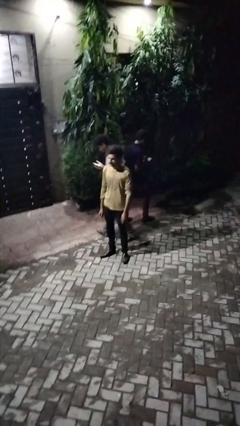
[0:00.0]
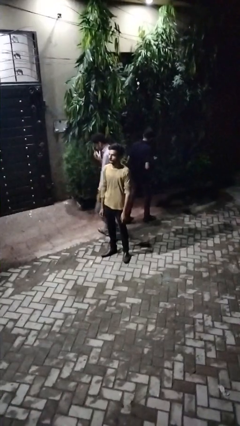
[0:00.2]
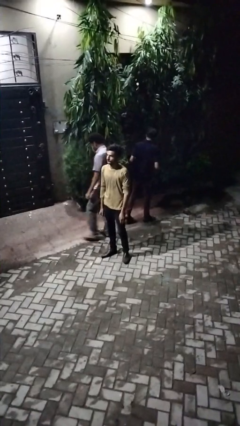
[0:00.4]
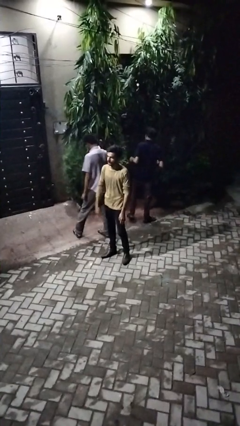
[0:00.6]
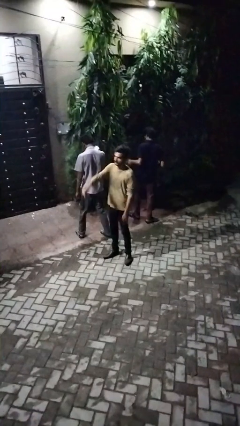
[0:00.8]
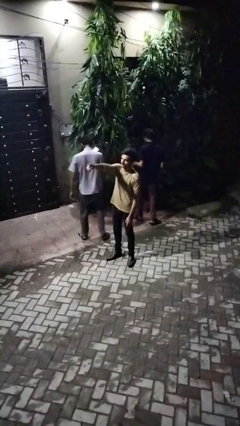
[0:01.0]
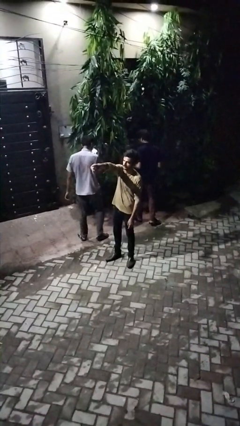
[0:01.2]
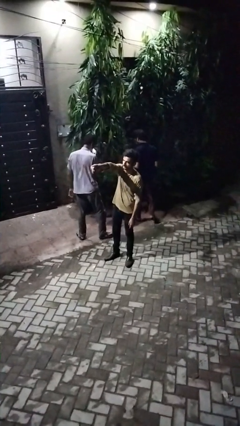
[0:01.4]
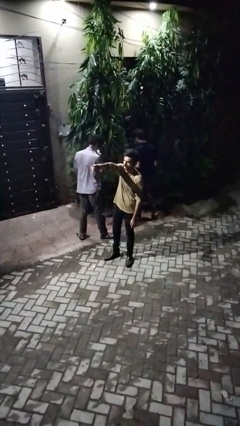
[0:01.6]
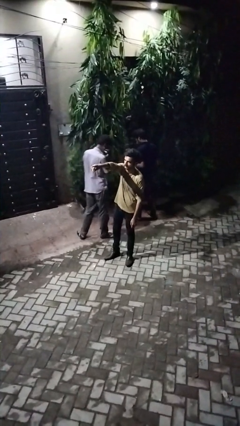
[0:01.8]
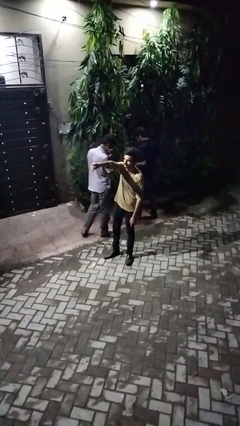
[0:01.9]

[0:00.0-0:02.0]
person points at person

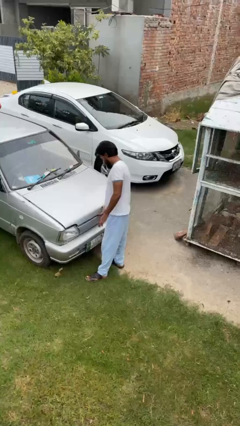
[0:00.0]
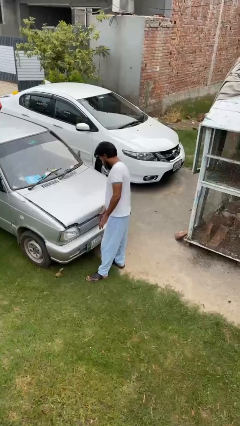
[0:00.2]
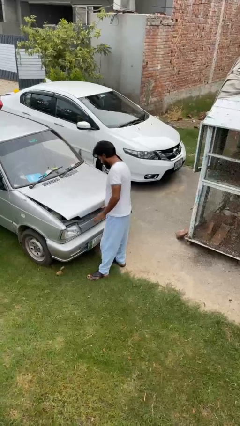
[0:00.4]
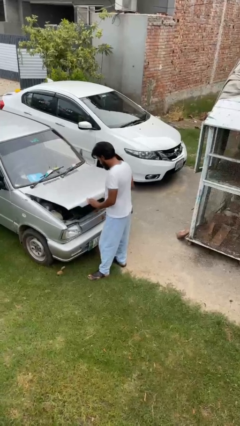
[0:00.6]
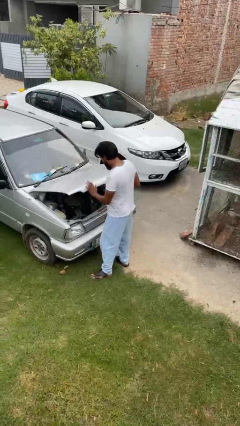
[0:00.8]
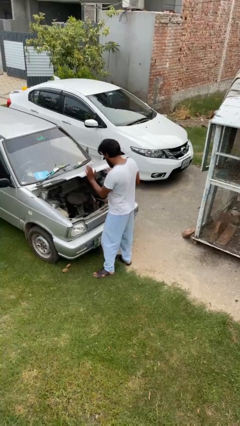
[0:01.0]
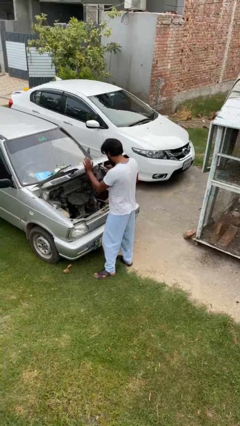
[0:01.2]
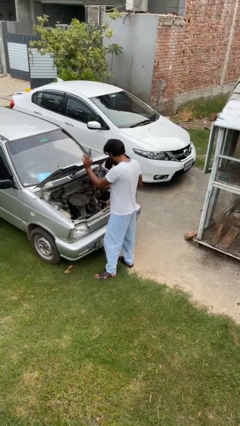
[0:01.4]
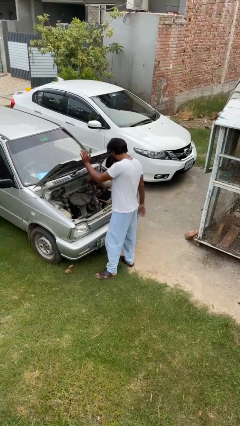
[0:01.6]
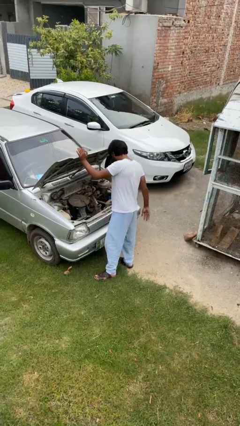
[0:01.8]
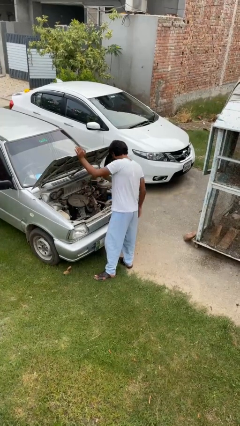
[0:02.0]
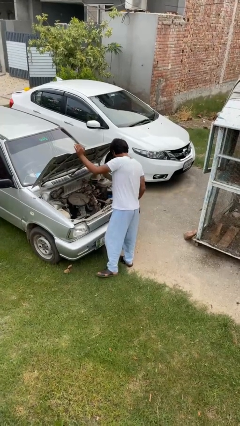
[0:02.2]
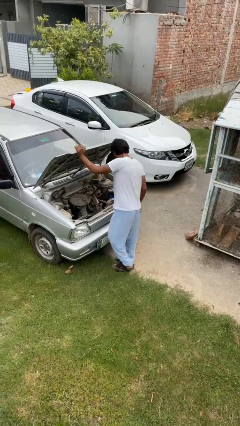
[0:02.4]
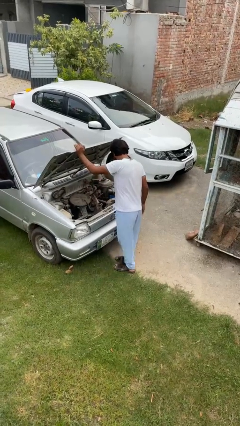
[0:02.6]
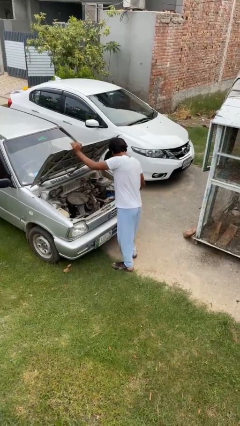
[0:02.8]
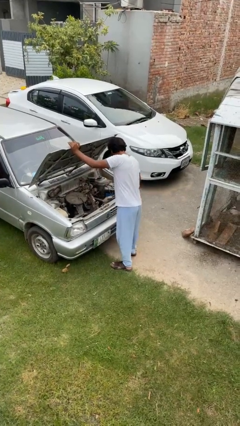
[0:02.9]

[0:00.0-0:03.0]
person opens car hood

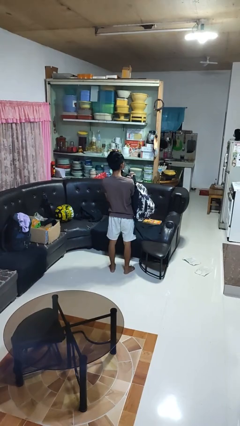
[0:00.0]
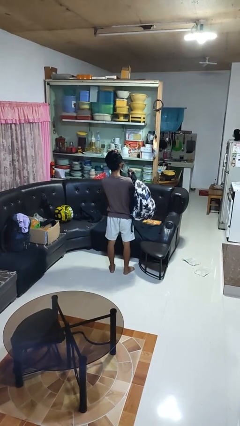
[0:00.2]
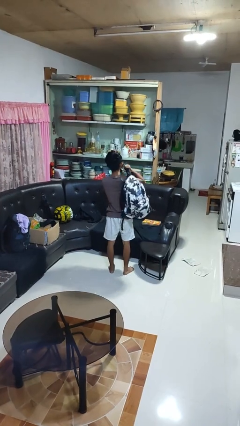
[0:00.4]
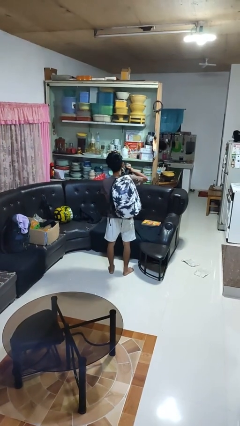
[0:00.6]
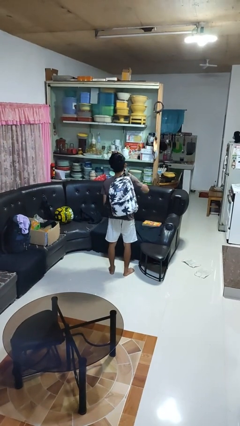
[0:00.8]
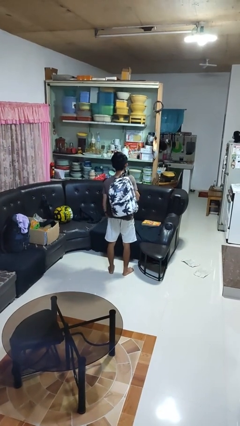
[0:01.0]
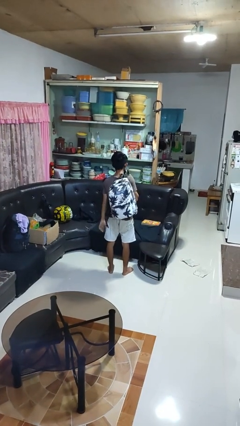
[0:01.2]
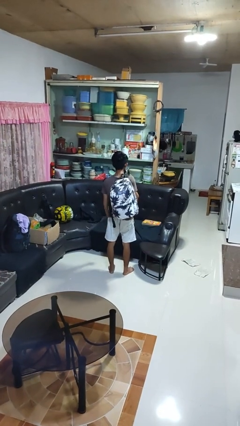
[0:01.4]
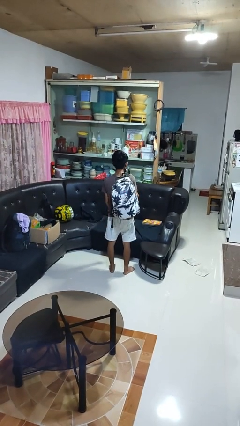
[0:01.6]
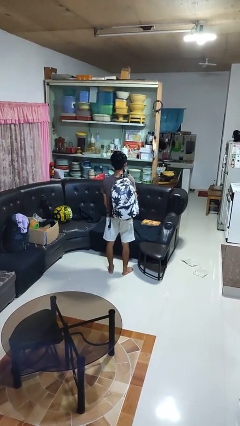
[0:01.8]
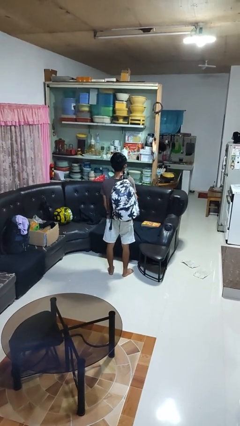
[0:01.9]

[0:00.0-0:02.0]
person puts on backpack

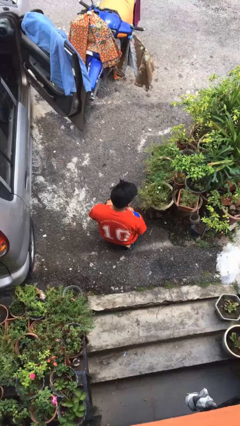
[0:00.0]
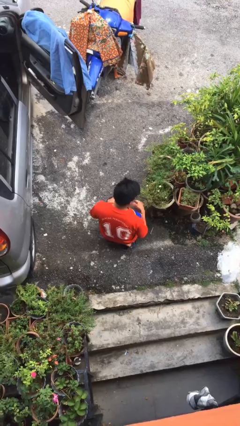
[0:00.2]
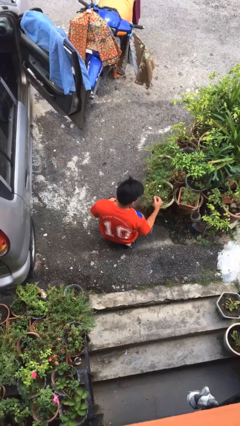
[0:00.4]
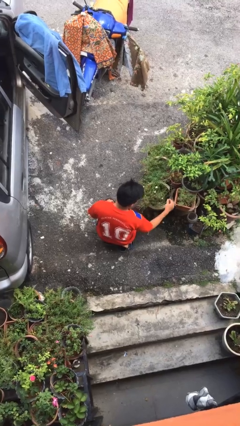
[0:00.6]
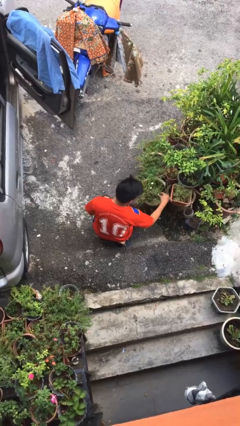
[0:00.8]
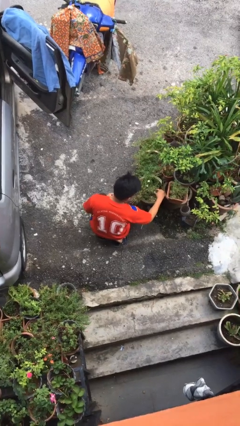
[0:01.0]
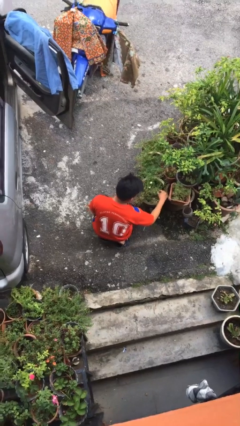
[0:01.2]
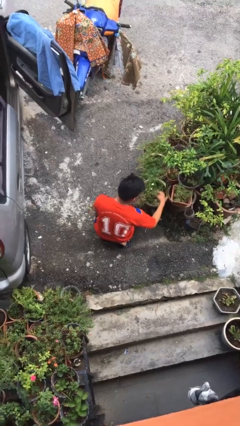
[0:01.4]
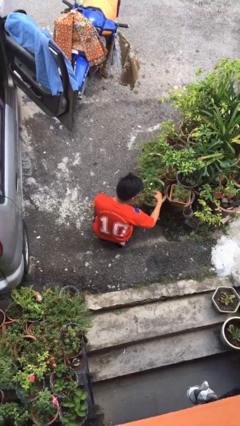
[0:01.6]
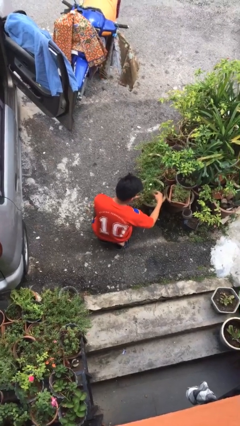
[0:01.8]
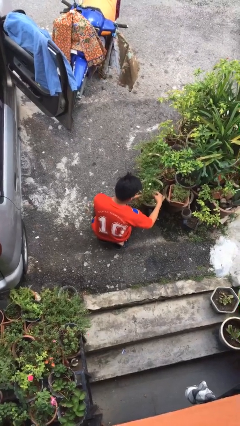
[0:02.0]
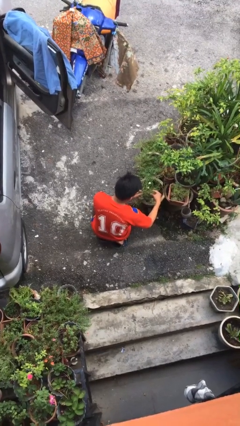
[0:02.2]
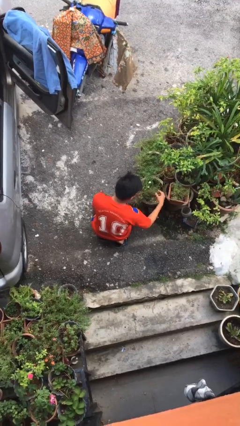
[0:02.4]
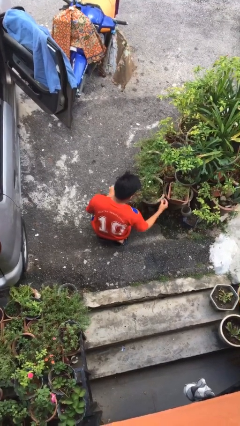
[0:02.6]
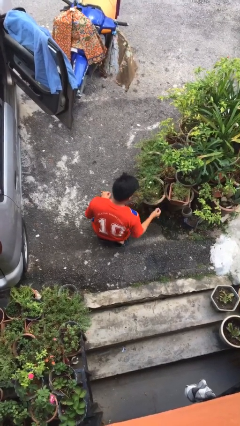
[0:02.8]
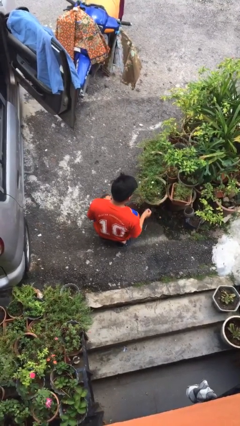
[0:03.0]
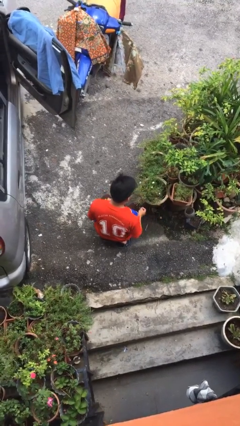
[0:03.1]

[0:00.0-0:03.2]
person arranges flowers in vase

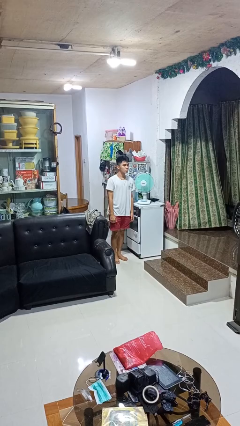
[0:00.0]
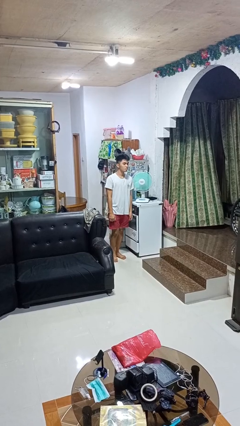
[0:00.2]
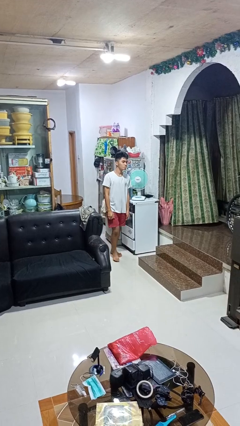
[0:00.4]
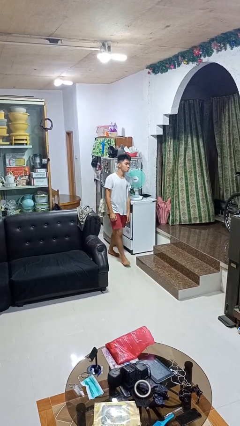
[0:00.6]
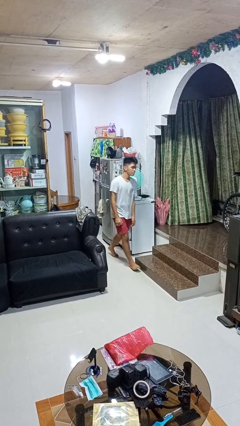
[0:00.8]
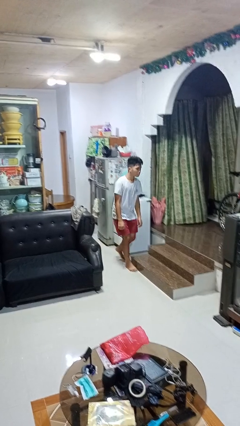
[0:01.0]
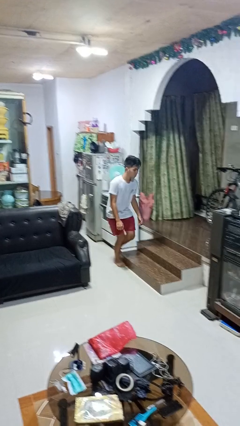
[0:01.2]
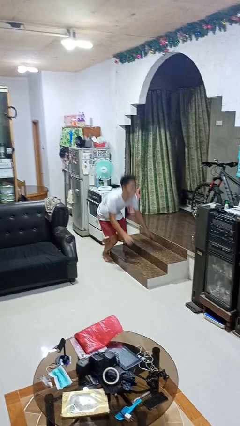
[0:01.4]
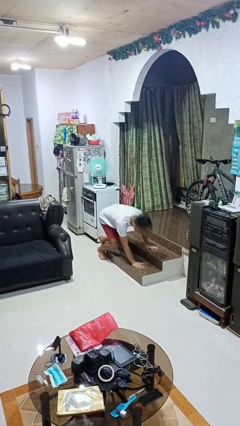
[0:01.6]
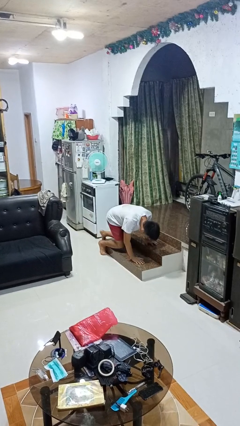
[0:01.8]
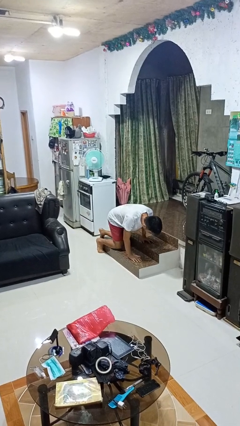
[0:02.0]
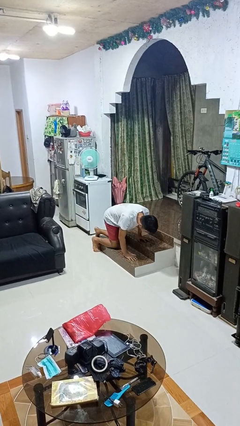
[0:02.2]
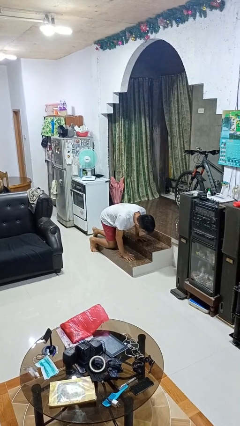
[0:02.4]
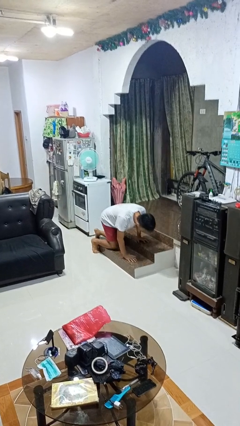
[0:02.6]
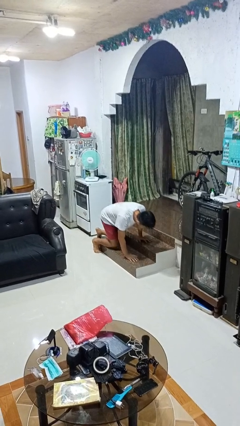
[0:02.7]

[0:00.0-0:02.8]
person trips on object on floor

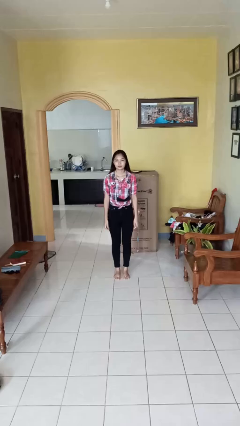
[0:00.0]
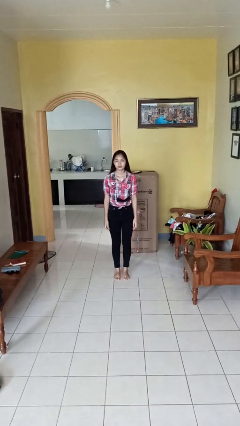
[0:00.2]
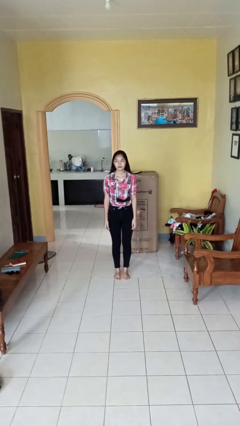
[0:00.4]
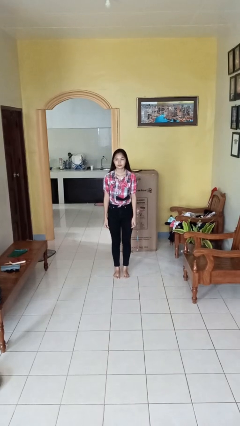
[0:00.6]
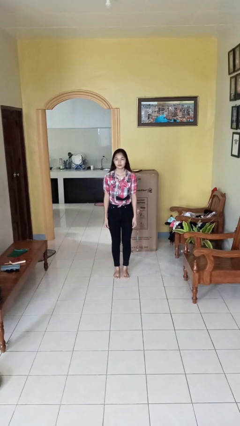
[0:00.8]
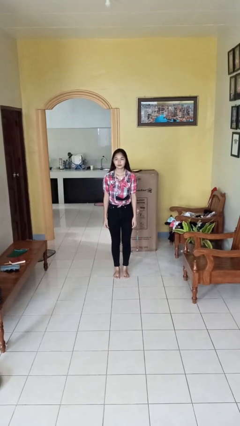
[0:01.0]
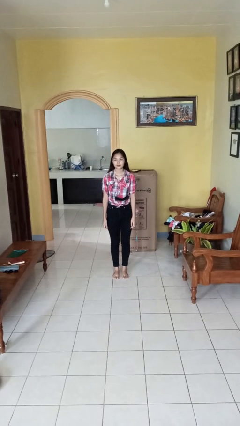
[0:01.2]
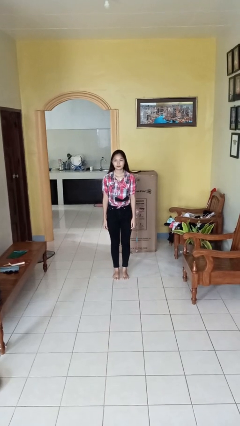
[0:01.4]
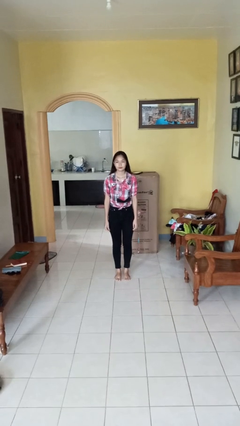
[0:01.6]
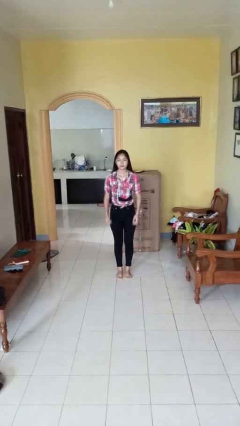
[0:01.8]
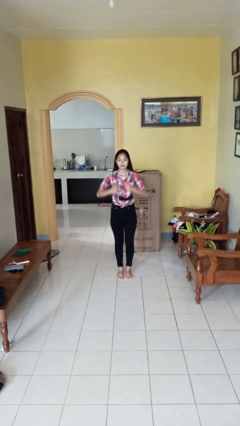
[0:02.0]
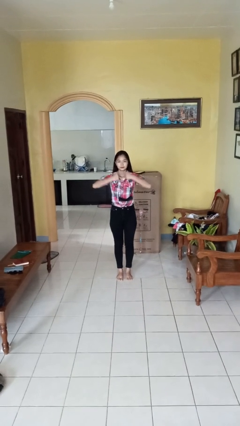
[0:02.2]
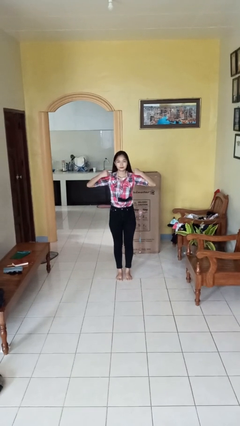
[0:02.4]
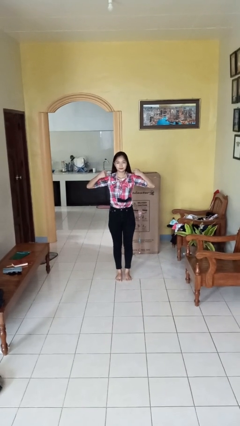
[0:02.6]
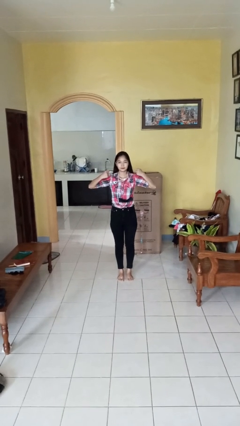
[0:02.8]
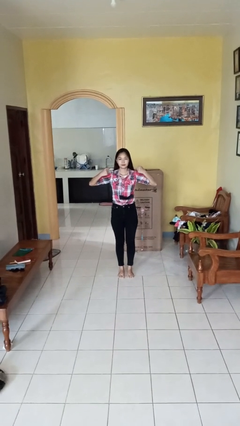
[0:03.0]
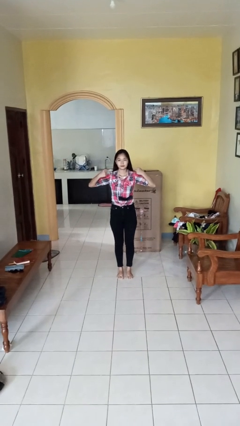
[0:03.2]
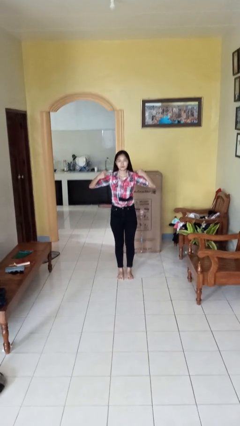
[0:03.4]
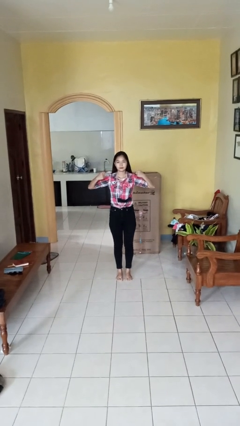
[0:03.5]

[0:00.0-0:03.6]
person gestures zoom in

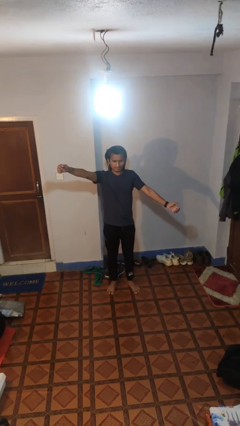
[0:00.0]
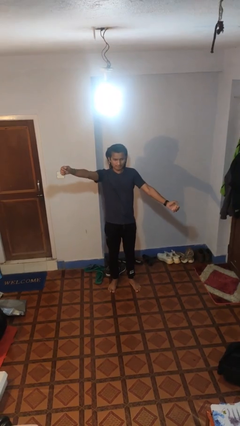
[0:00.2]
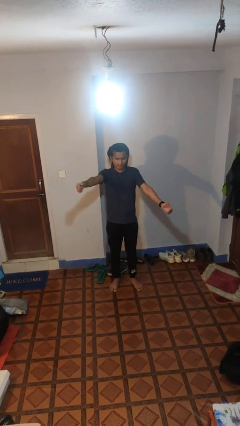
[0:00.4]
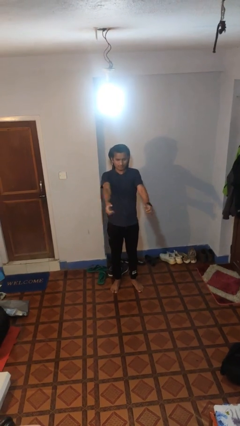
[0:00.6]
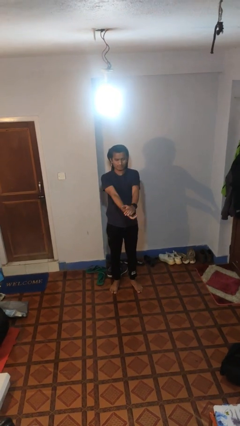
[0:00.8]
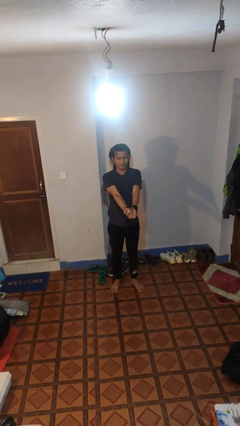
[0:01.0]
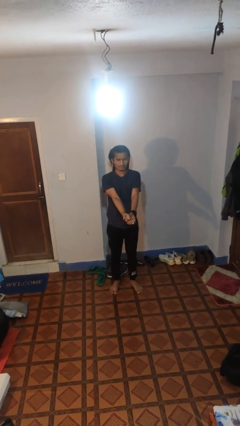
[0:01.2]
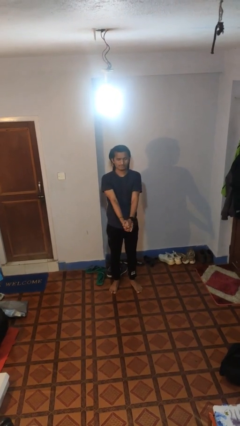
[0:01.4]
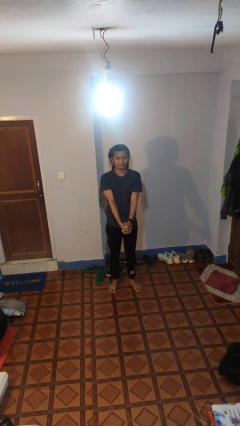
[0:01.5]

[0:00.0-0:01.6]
person gestures zoom out
